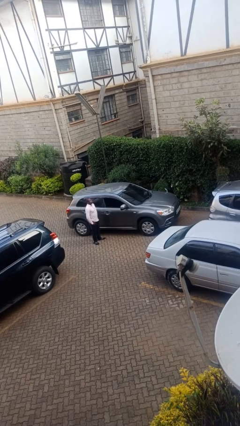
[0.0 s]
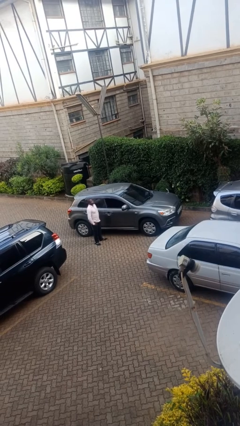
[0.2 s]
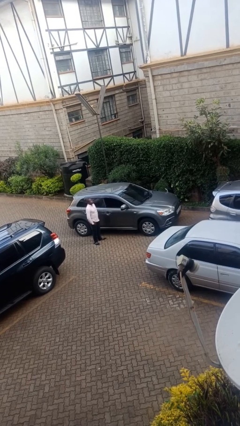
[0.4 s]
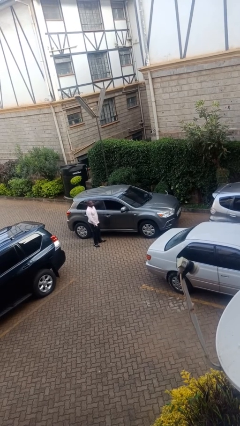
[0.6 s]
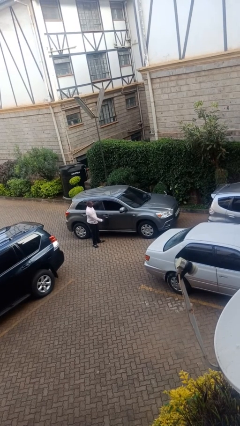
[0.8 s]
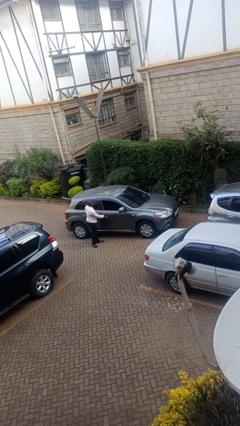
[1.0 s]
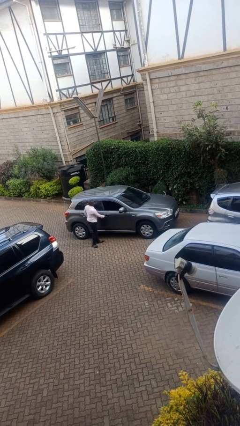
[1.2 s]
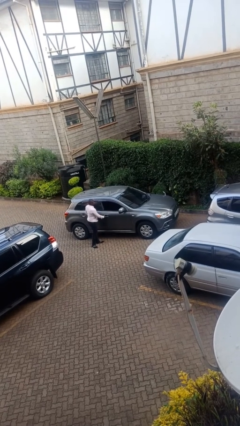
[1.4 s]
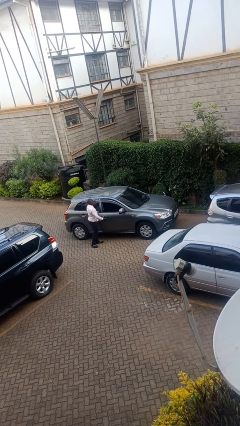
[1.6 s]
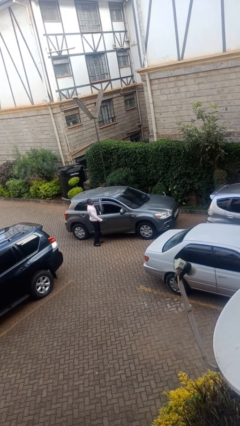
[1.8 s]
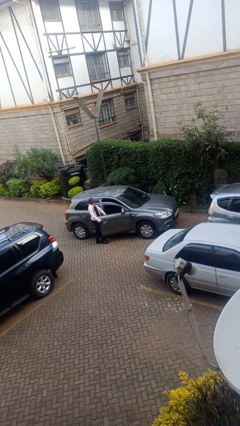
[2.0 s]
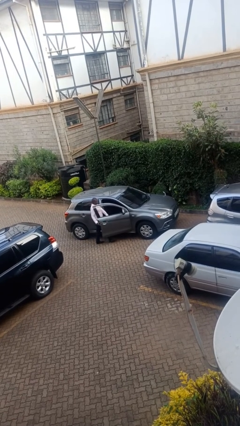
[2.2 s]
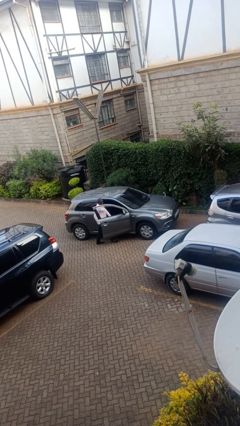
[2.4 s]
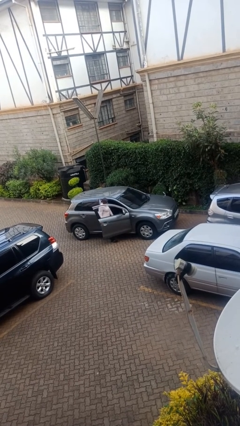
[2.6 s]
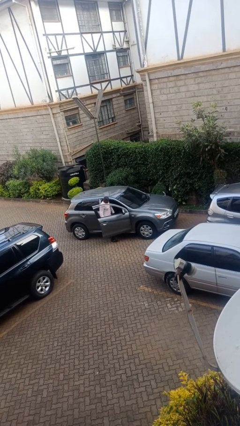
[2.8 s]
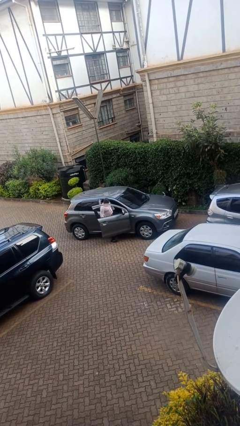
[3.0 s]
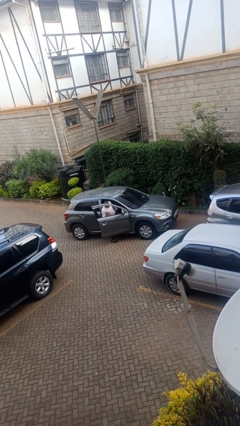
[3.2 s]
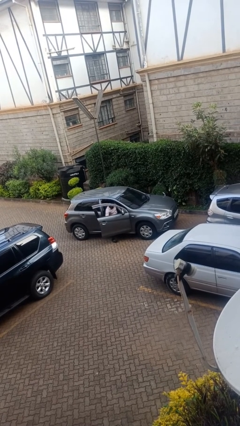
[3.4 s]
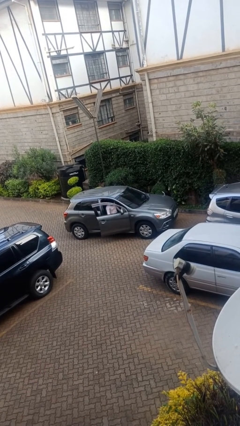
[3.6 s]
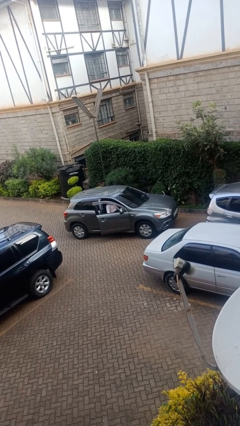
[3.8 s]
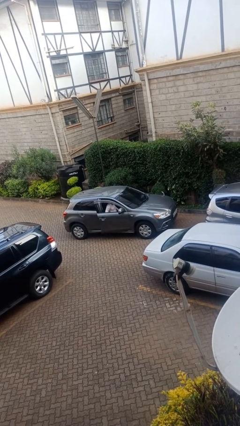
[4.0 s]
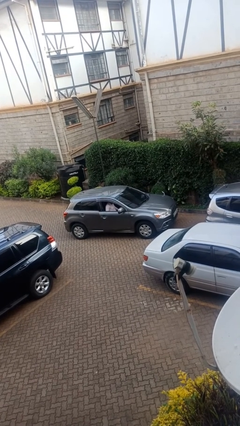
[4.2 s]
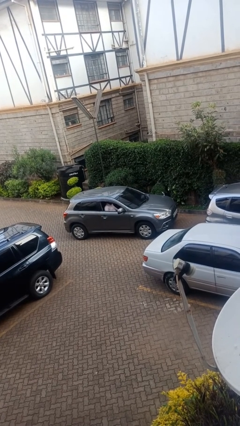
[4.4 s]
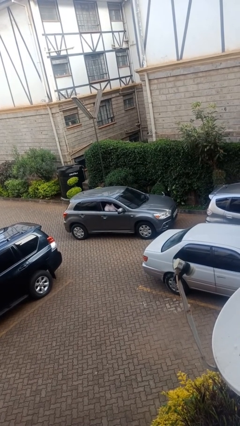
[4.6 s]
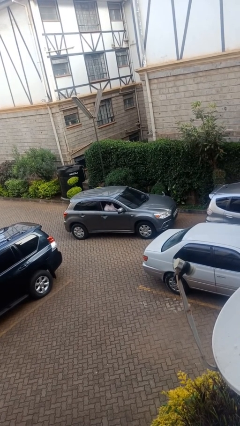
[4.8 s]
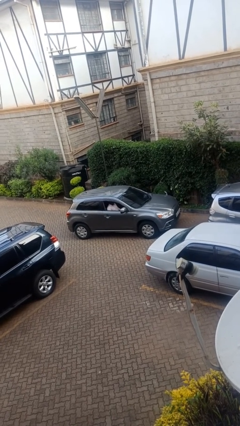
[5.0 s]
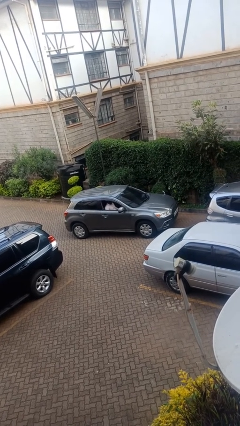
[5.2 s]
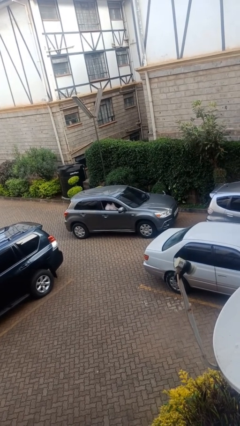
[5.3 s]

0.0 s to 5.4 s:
car picks up person

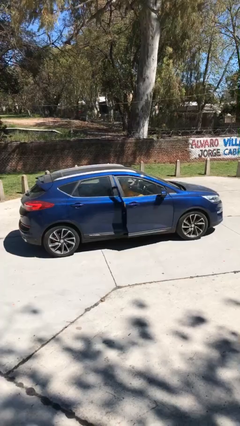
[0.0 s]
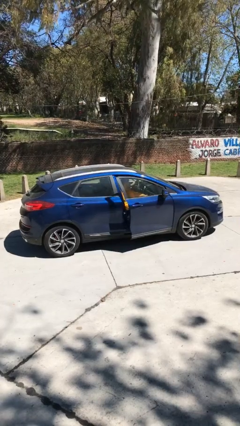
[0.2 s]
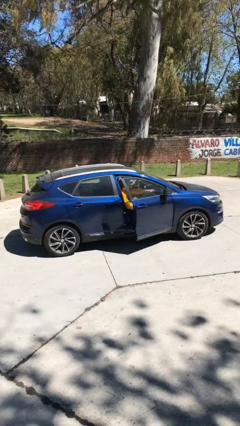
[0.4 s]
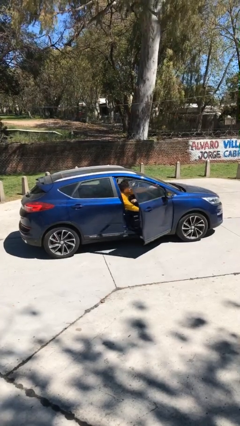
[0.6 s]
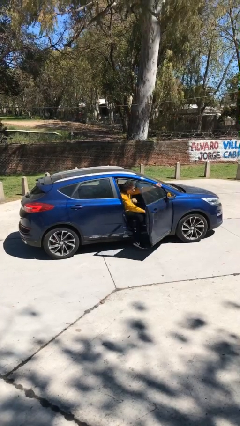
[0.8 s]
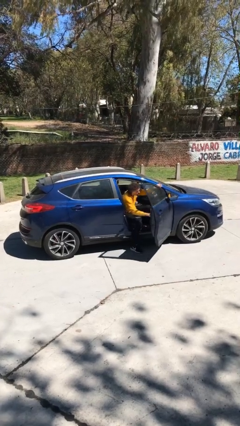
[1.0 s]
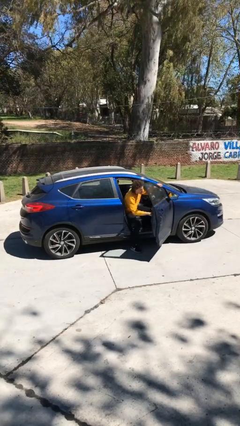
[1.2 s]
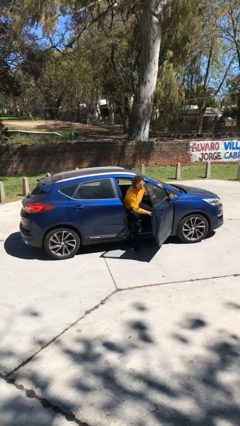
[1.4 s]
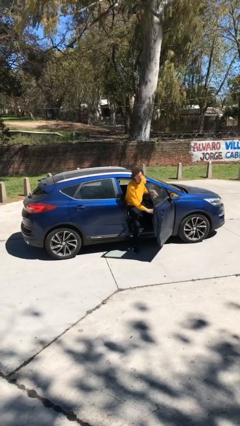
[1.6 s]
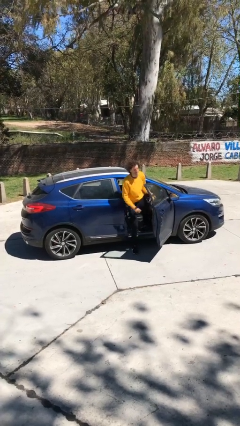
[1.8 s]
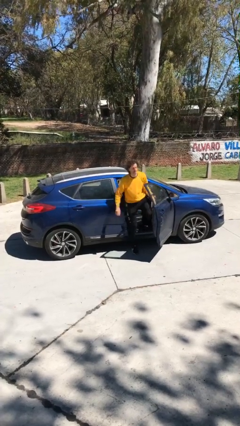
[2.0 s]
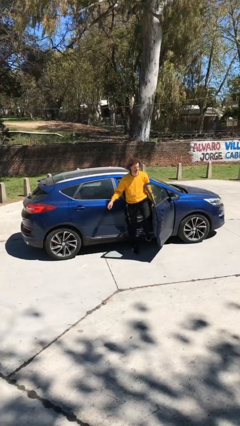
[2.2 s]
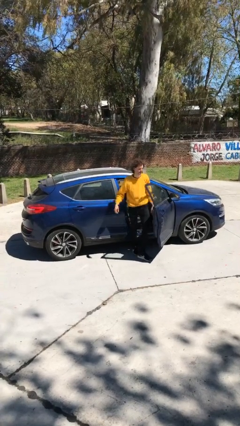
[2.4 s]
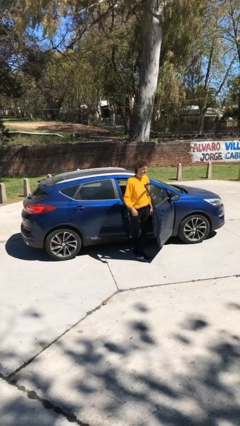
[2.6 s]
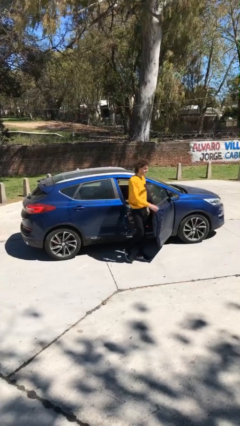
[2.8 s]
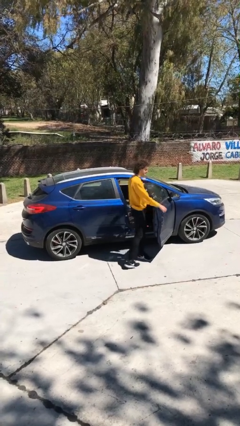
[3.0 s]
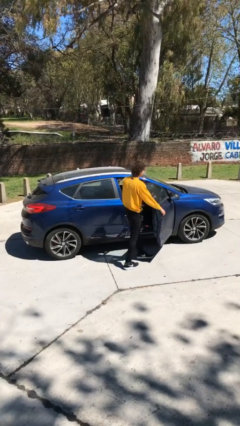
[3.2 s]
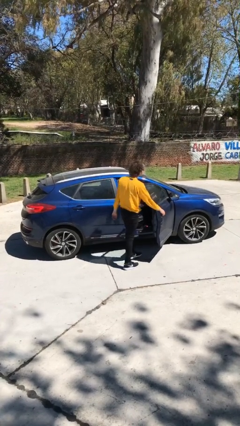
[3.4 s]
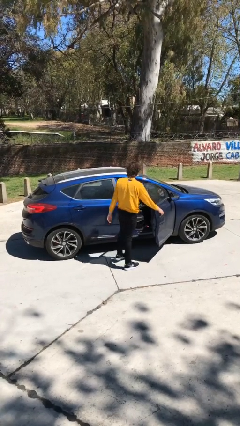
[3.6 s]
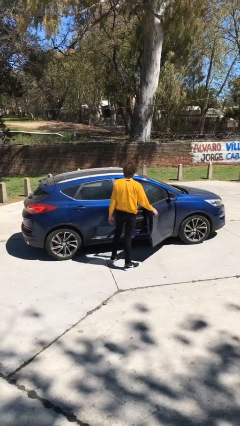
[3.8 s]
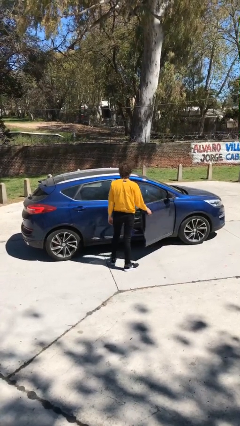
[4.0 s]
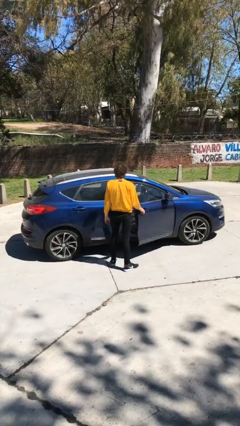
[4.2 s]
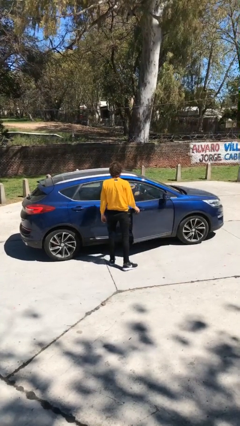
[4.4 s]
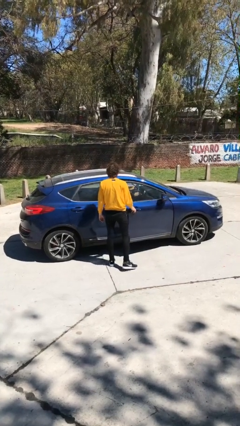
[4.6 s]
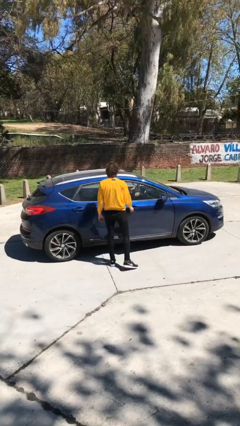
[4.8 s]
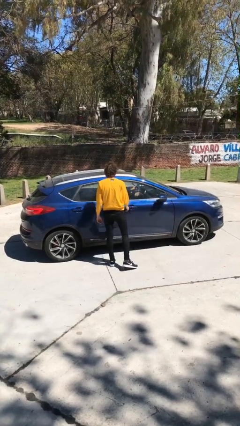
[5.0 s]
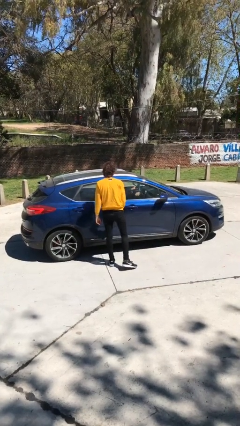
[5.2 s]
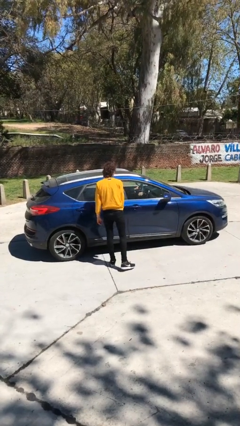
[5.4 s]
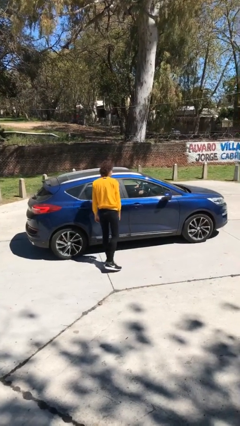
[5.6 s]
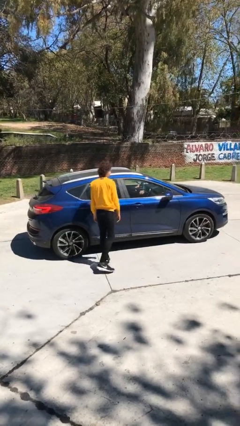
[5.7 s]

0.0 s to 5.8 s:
car drops off person

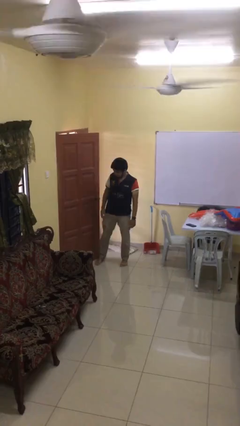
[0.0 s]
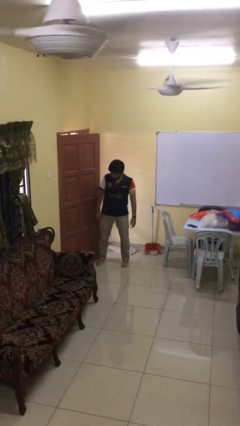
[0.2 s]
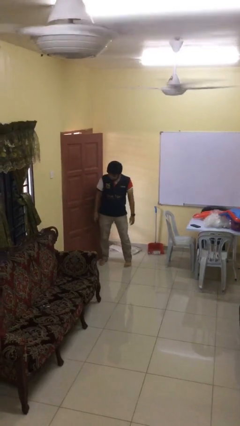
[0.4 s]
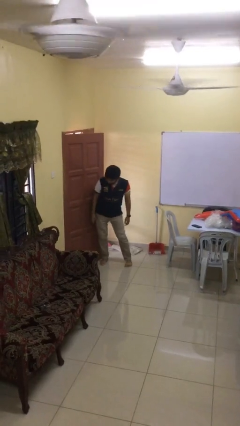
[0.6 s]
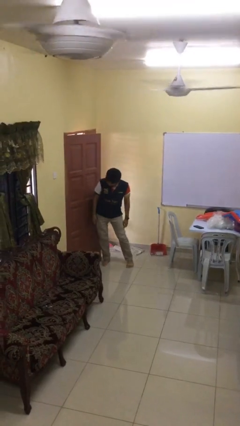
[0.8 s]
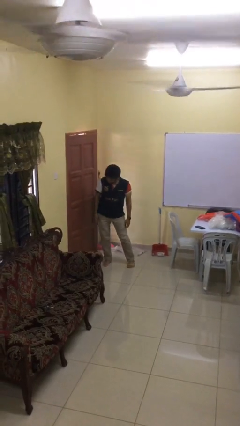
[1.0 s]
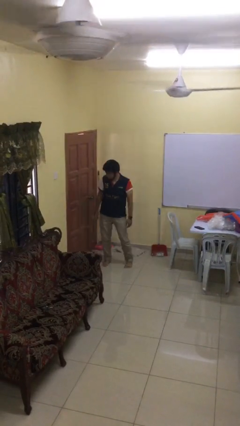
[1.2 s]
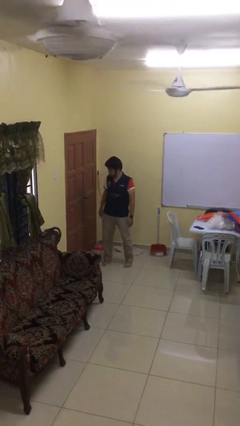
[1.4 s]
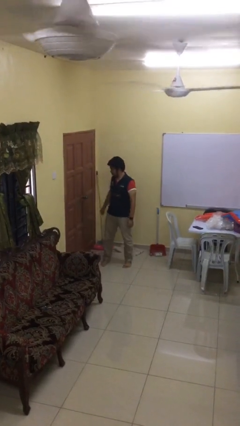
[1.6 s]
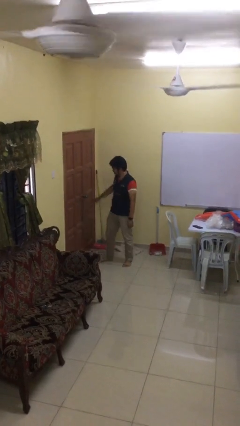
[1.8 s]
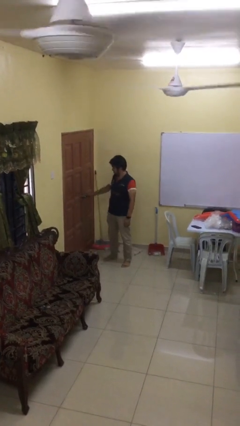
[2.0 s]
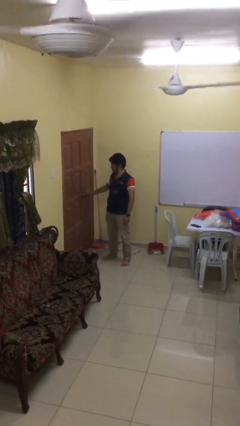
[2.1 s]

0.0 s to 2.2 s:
person closes door with hip

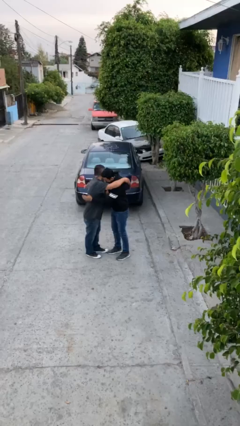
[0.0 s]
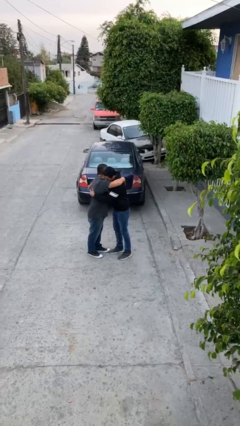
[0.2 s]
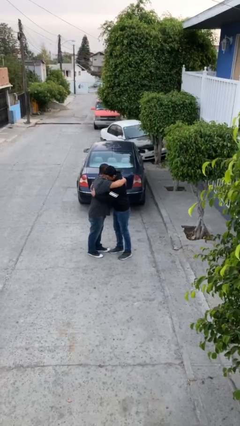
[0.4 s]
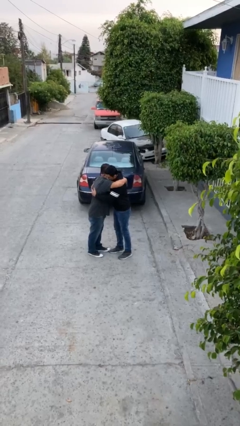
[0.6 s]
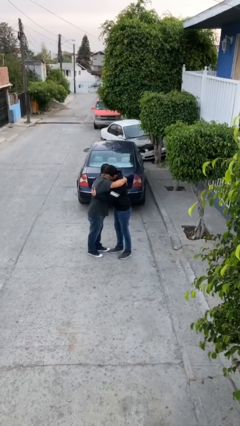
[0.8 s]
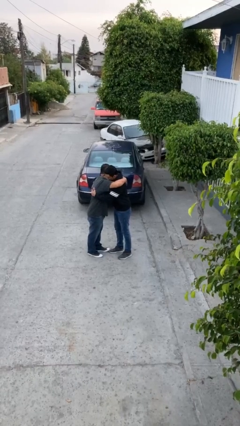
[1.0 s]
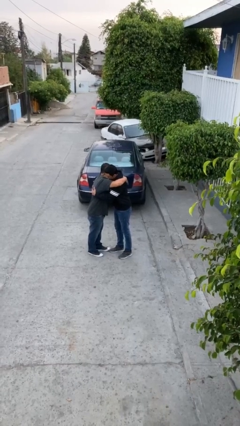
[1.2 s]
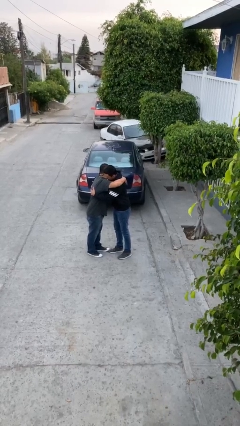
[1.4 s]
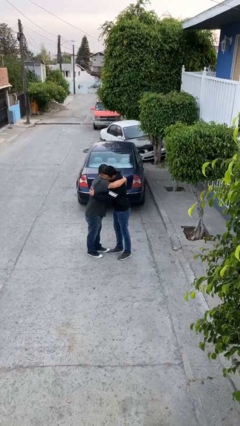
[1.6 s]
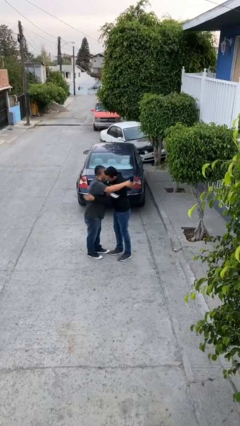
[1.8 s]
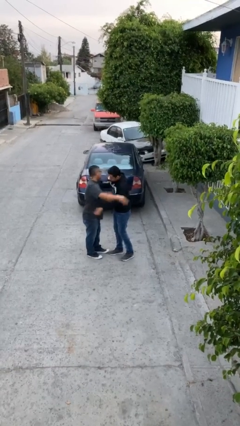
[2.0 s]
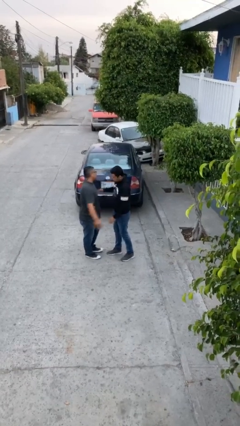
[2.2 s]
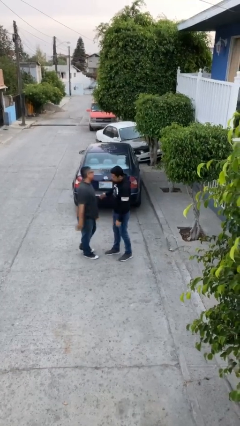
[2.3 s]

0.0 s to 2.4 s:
person embraces person

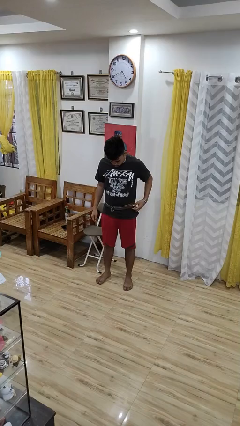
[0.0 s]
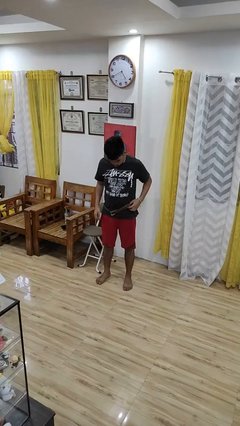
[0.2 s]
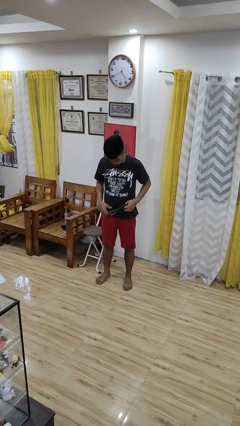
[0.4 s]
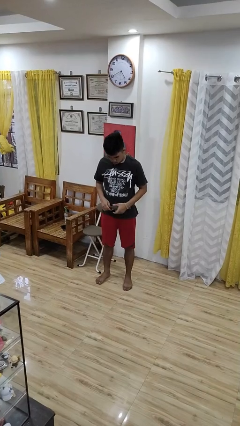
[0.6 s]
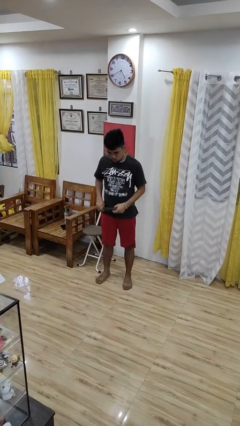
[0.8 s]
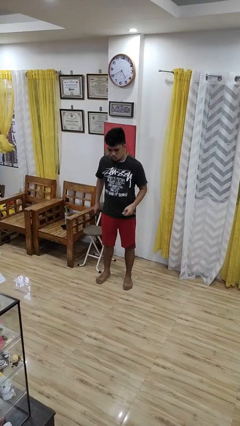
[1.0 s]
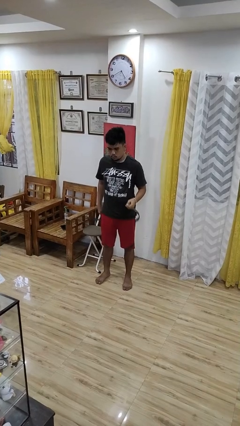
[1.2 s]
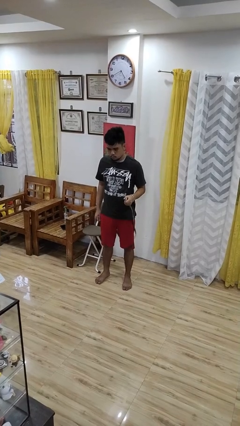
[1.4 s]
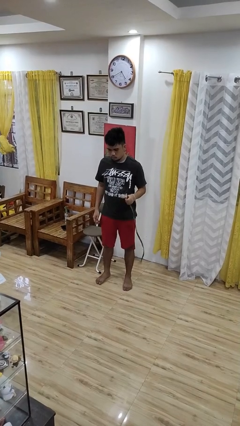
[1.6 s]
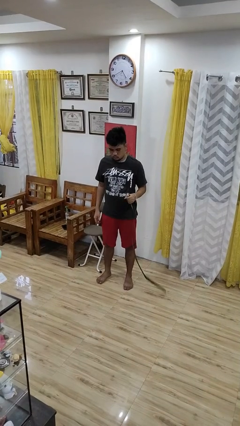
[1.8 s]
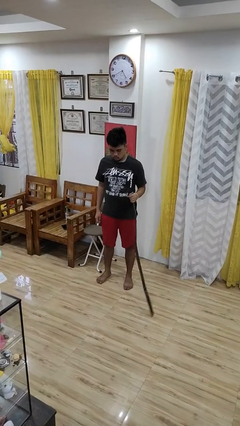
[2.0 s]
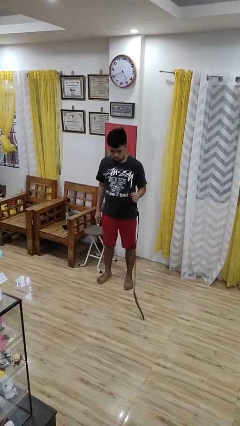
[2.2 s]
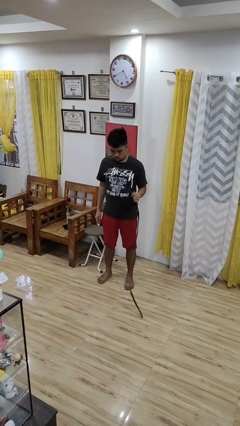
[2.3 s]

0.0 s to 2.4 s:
person takes off belt
